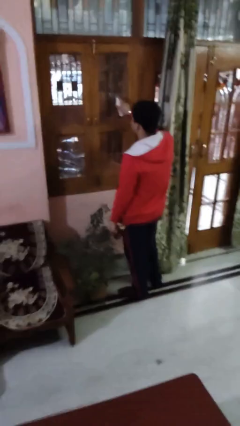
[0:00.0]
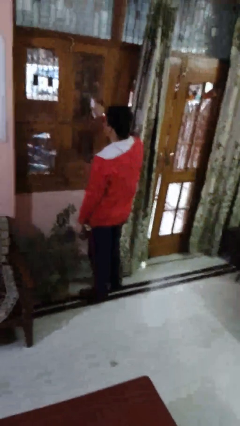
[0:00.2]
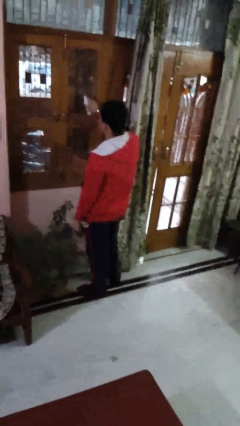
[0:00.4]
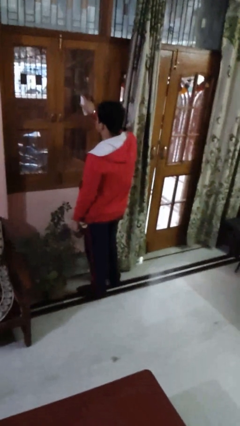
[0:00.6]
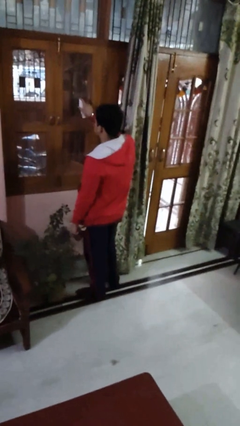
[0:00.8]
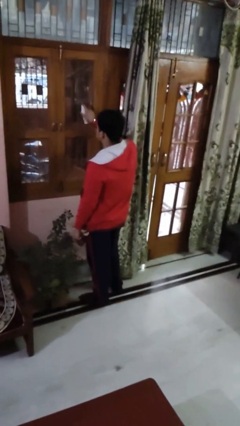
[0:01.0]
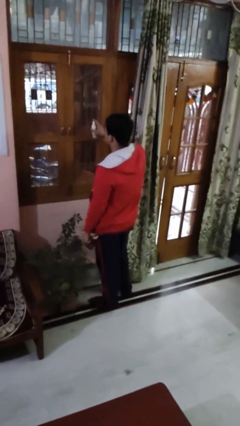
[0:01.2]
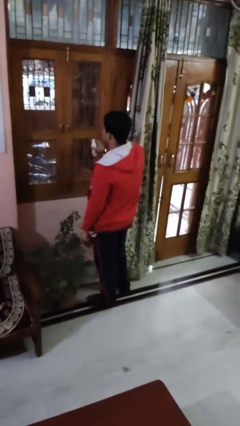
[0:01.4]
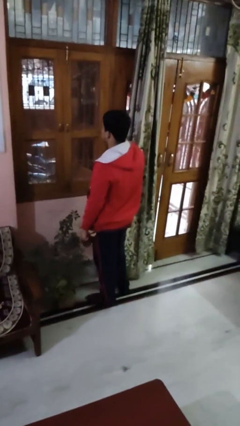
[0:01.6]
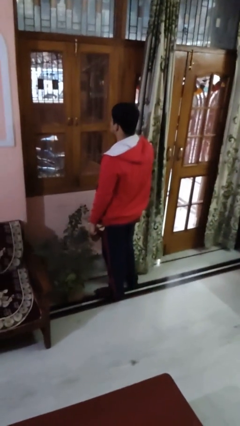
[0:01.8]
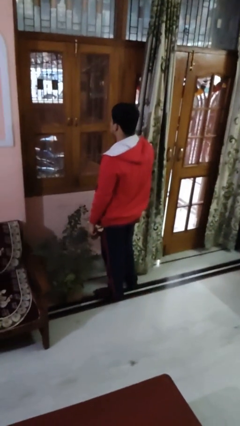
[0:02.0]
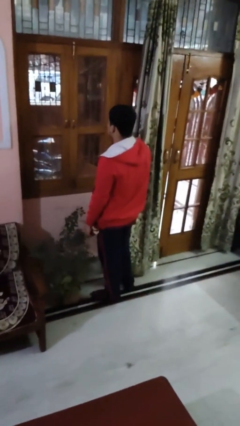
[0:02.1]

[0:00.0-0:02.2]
person sprays from bottle

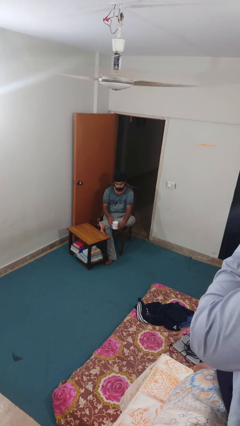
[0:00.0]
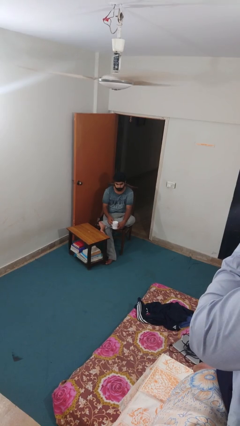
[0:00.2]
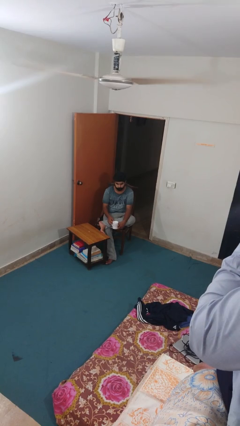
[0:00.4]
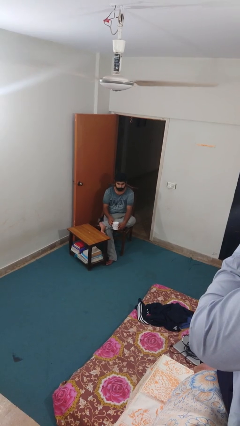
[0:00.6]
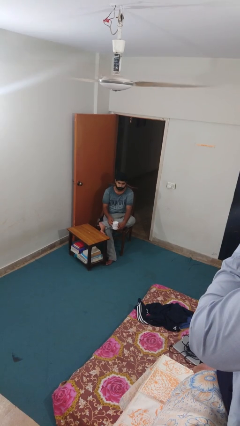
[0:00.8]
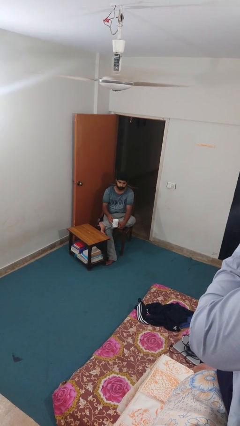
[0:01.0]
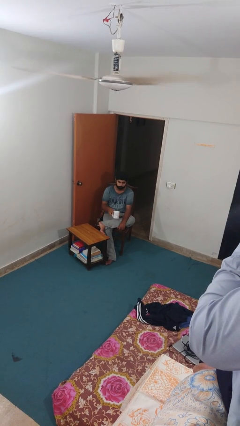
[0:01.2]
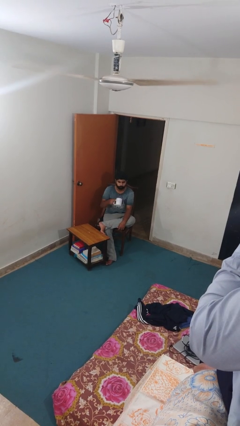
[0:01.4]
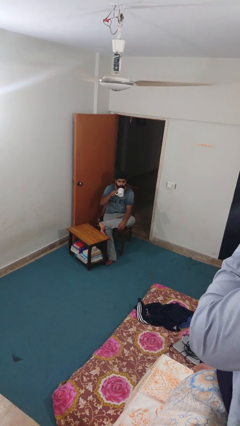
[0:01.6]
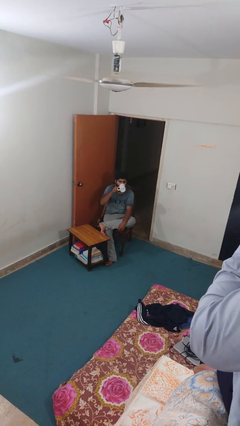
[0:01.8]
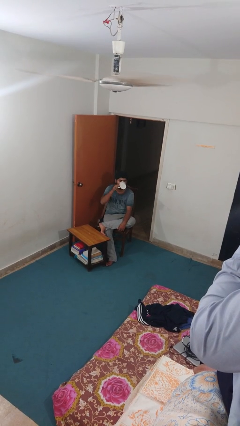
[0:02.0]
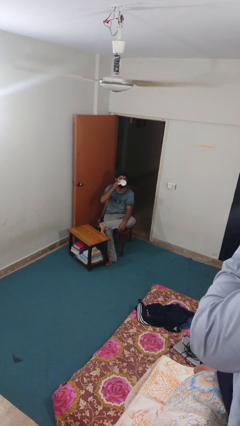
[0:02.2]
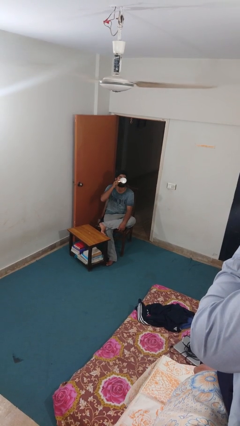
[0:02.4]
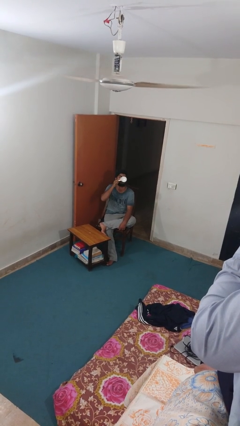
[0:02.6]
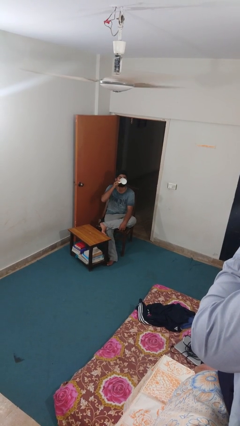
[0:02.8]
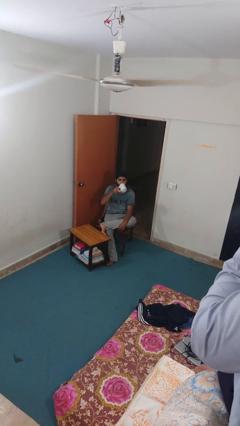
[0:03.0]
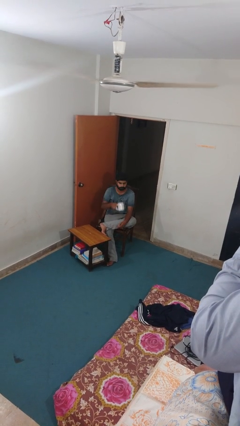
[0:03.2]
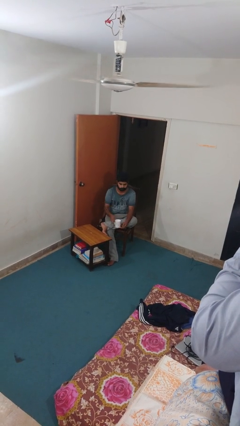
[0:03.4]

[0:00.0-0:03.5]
person drinks from mug

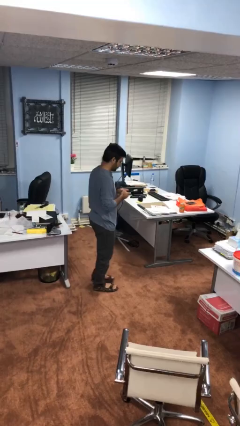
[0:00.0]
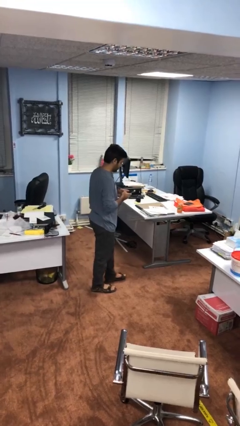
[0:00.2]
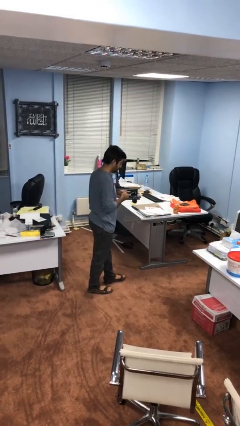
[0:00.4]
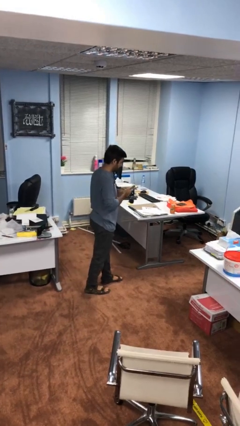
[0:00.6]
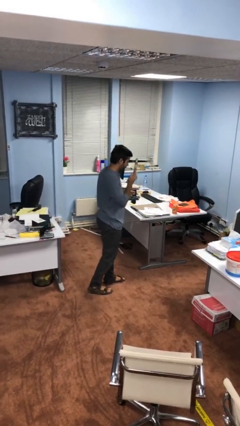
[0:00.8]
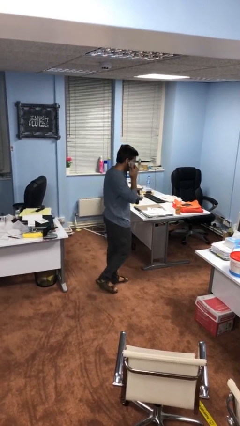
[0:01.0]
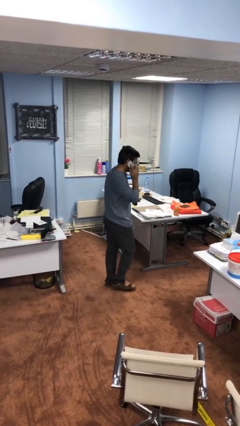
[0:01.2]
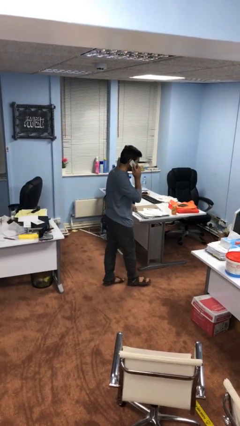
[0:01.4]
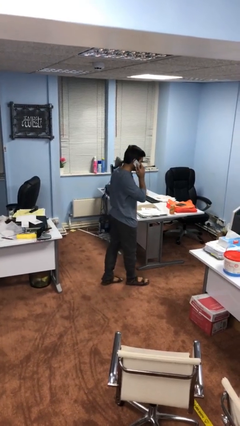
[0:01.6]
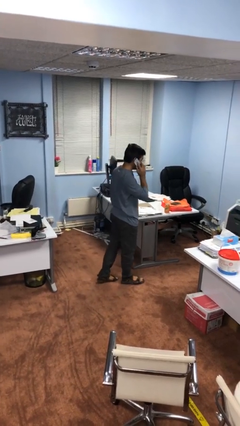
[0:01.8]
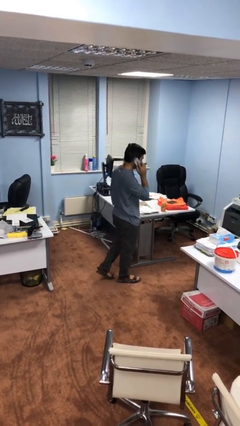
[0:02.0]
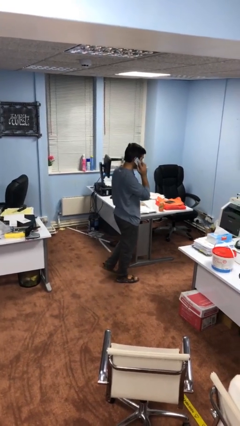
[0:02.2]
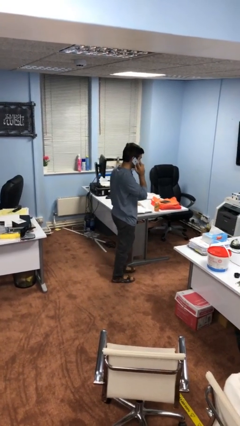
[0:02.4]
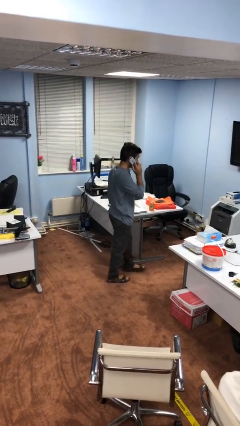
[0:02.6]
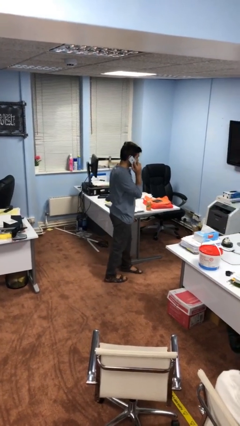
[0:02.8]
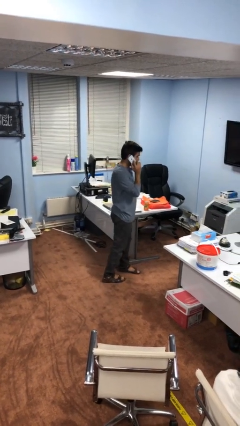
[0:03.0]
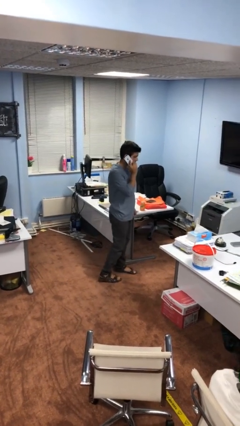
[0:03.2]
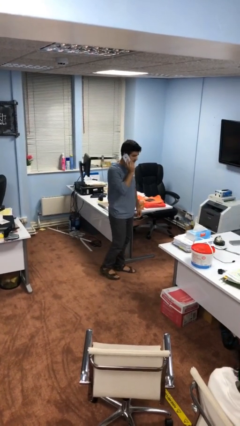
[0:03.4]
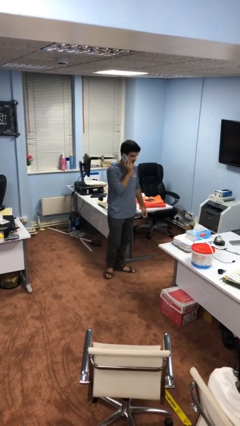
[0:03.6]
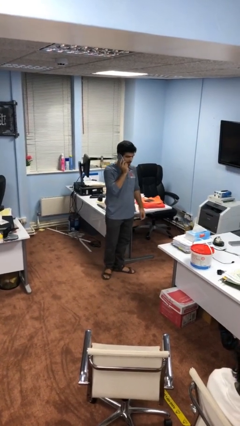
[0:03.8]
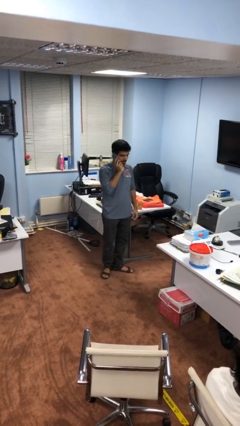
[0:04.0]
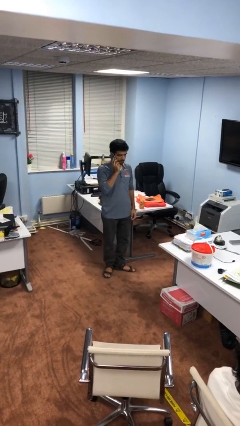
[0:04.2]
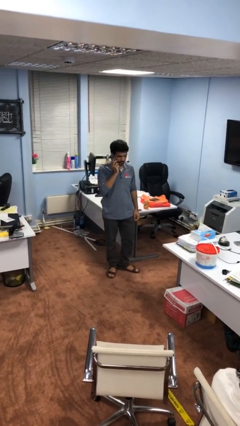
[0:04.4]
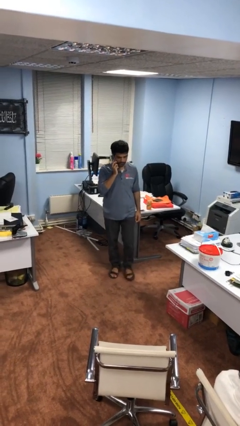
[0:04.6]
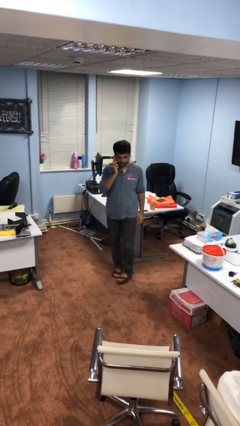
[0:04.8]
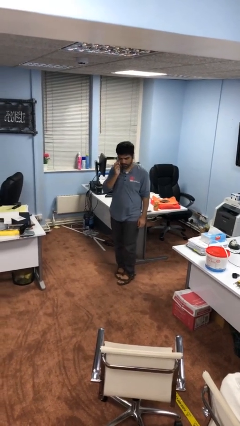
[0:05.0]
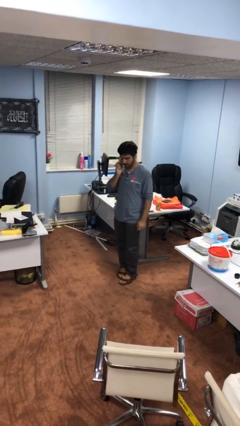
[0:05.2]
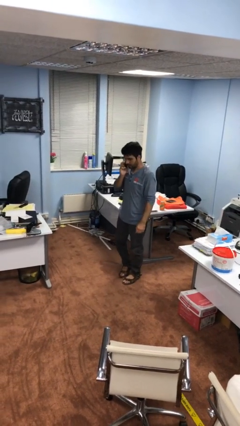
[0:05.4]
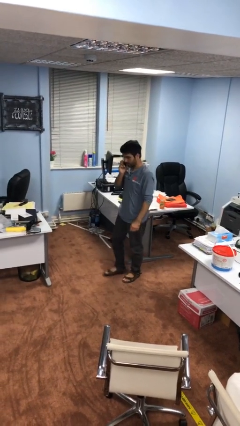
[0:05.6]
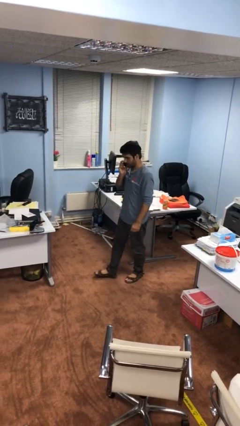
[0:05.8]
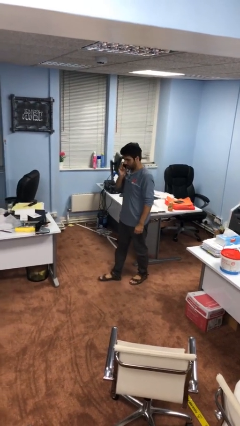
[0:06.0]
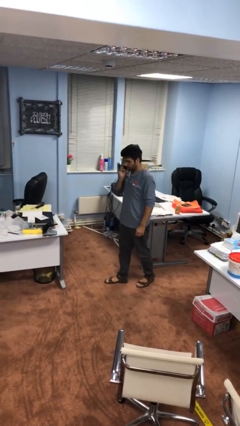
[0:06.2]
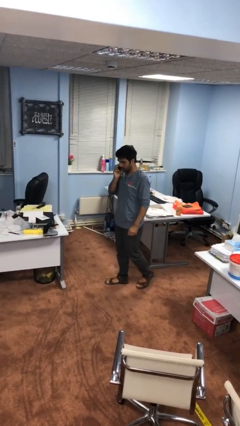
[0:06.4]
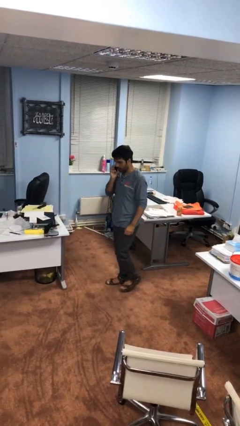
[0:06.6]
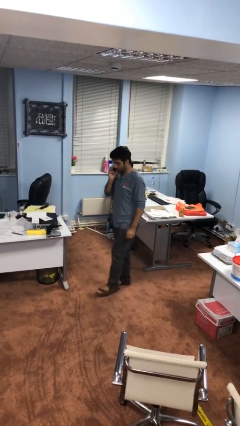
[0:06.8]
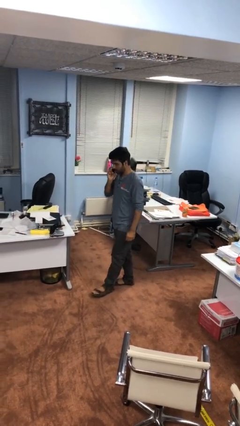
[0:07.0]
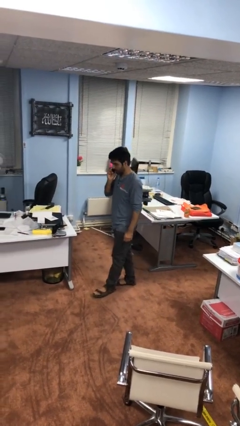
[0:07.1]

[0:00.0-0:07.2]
person talks on phone

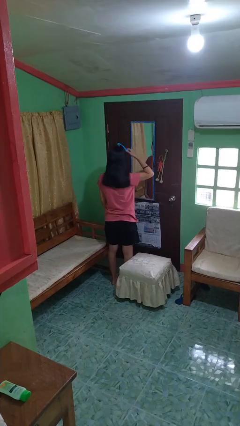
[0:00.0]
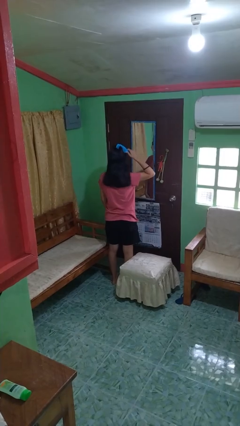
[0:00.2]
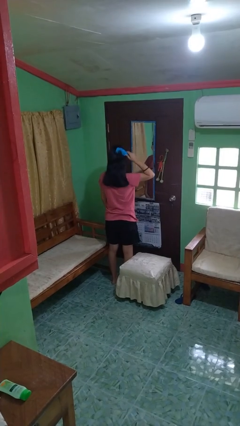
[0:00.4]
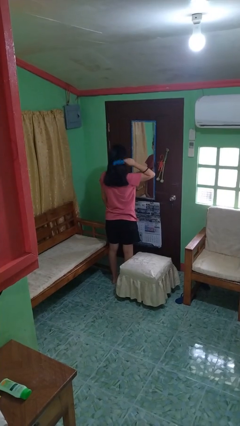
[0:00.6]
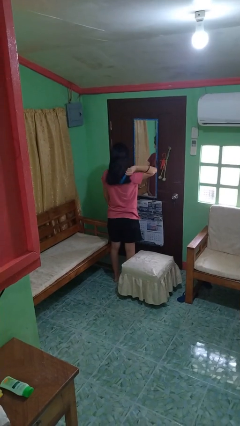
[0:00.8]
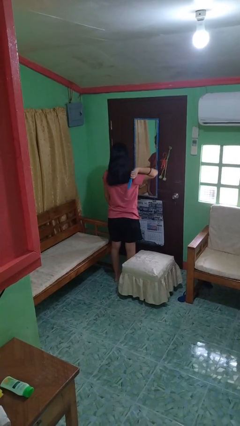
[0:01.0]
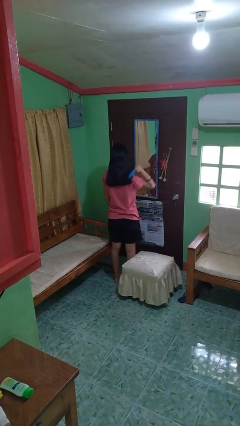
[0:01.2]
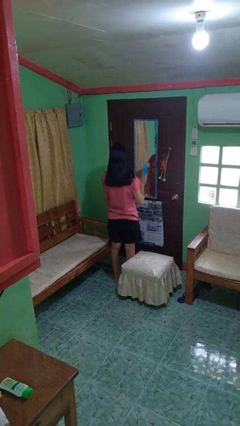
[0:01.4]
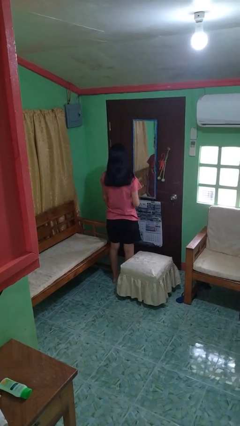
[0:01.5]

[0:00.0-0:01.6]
person brushes hair

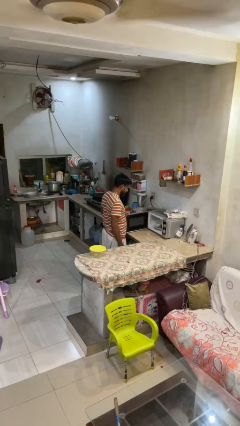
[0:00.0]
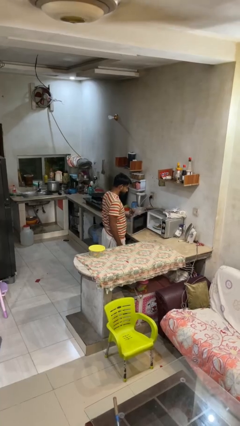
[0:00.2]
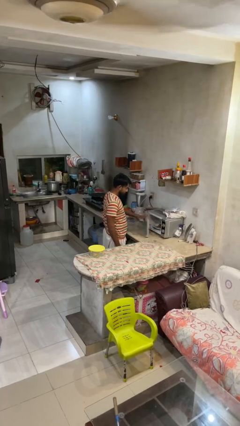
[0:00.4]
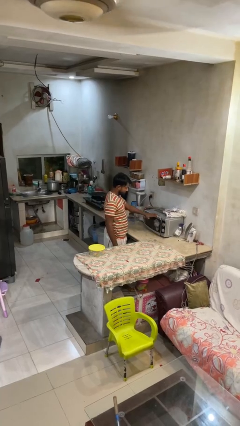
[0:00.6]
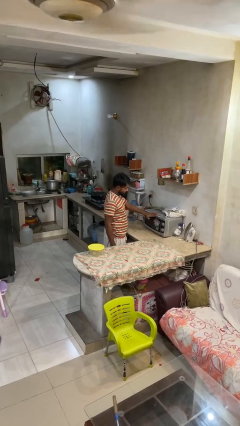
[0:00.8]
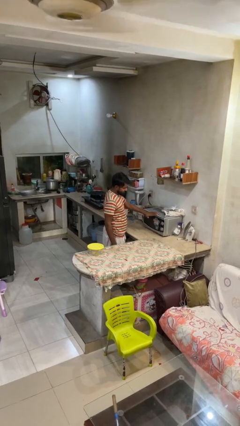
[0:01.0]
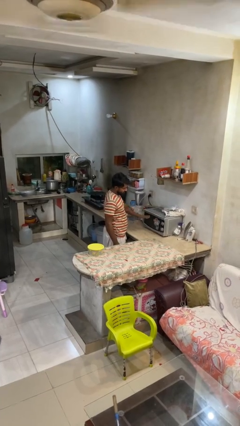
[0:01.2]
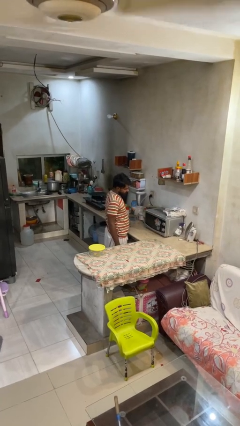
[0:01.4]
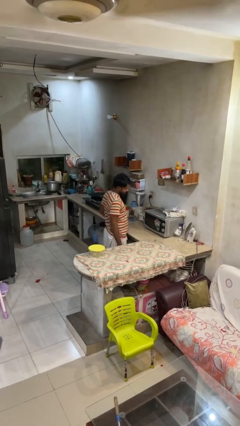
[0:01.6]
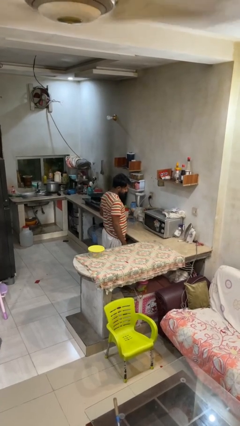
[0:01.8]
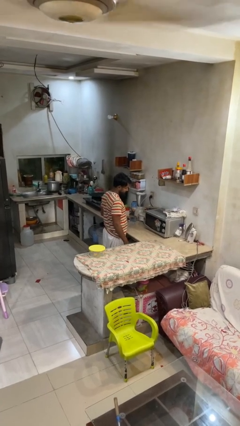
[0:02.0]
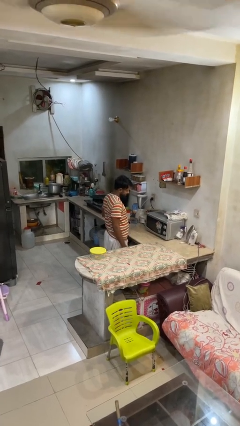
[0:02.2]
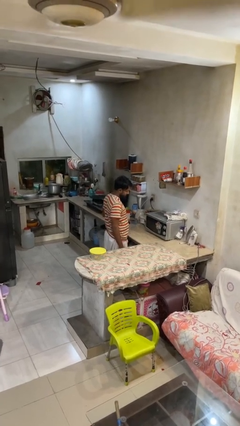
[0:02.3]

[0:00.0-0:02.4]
person closes microwave

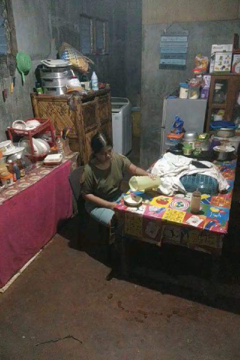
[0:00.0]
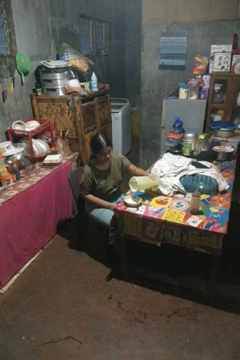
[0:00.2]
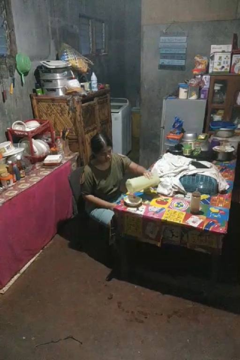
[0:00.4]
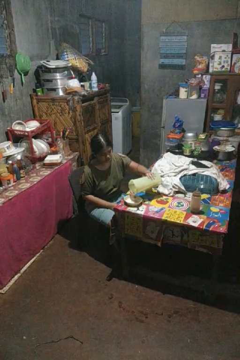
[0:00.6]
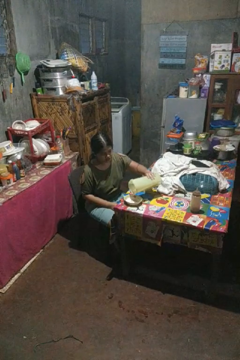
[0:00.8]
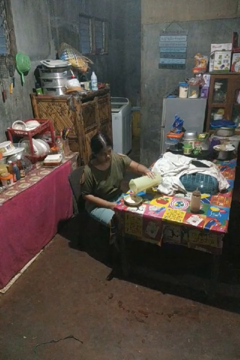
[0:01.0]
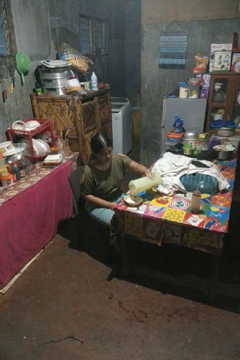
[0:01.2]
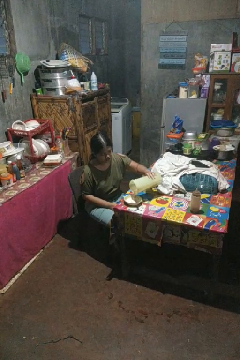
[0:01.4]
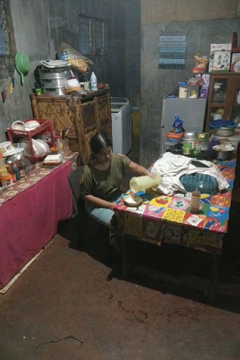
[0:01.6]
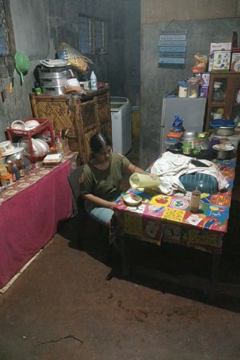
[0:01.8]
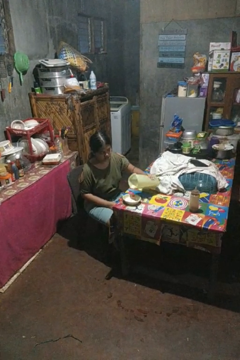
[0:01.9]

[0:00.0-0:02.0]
person pours into bowl
